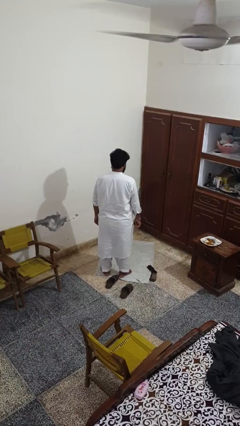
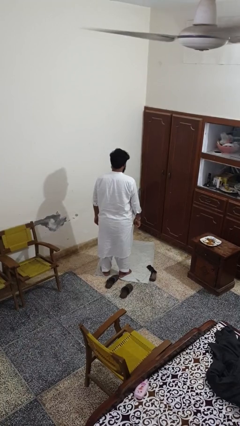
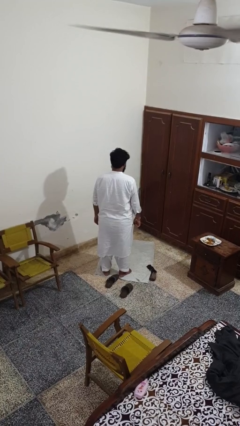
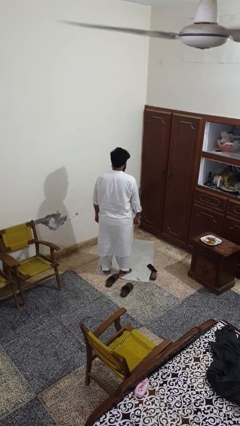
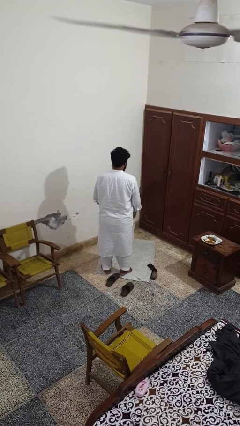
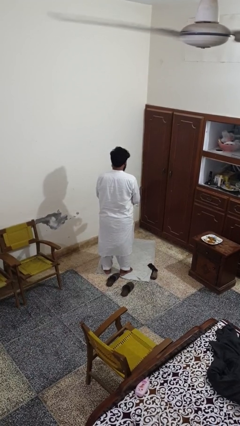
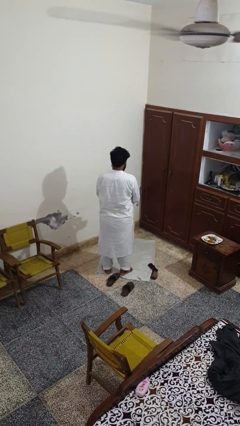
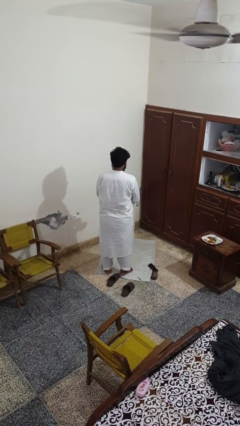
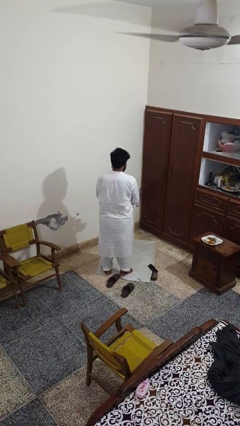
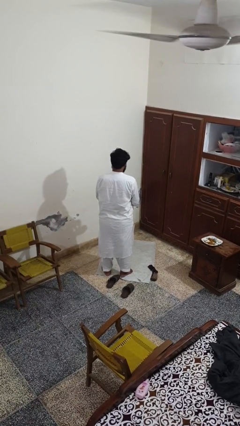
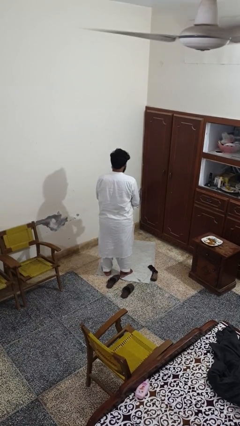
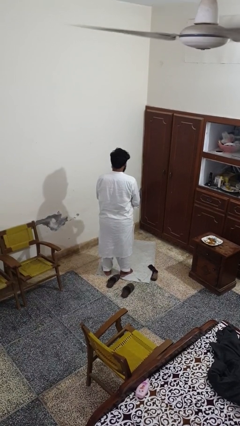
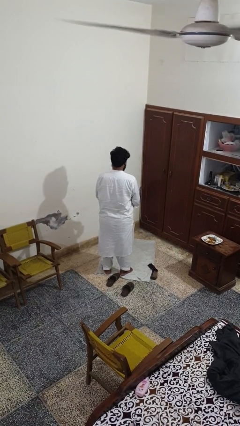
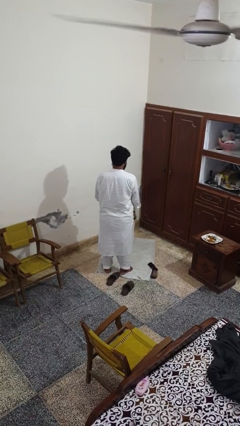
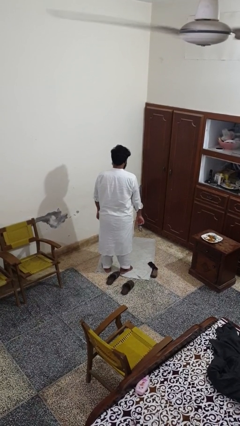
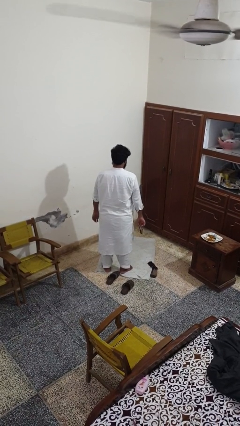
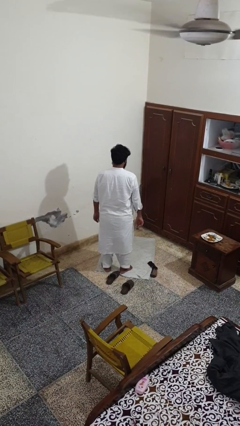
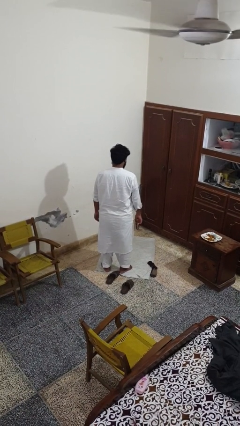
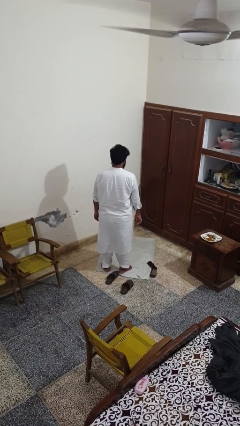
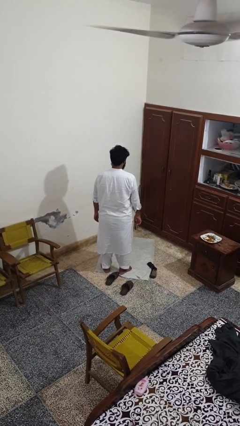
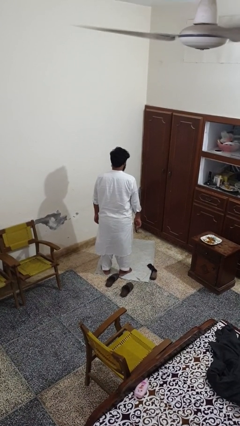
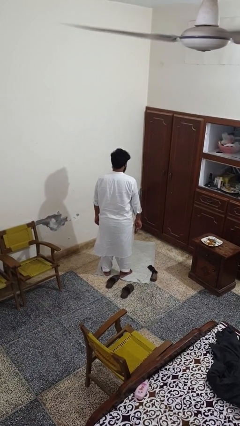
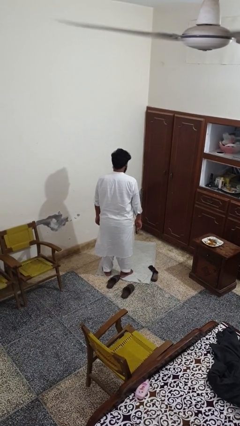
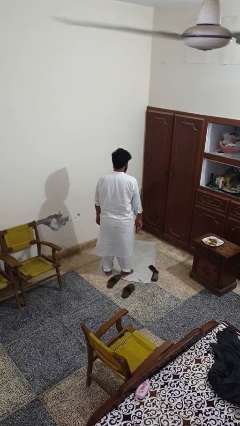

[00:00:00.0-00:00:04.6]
person takes off wristwatch

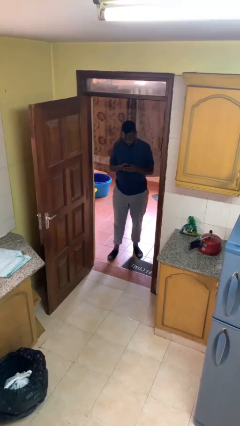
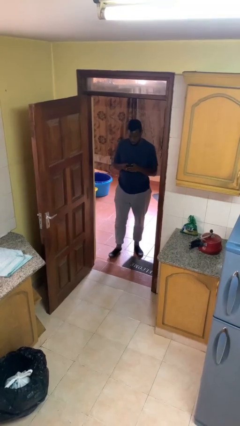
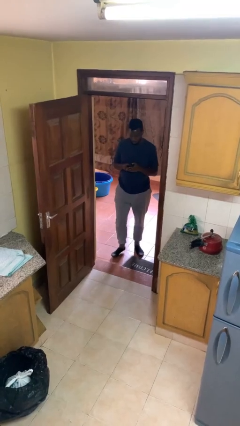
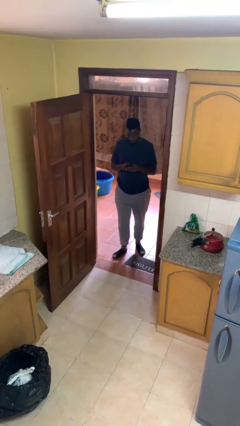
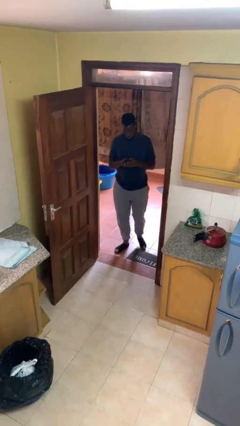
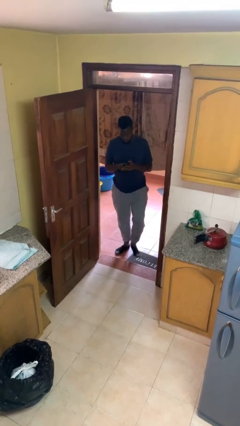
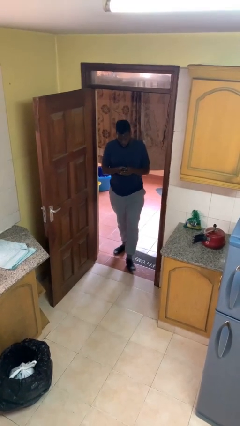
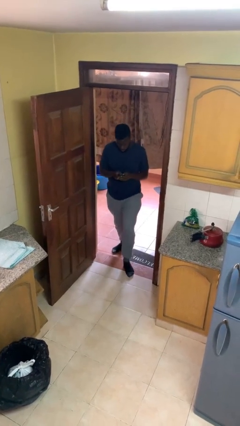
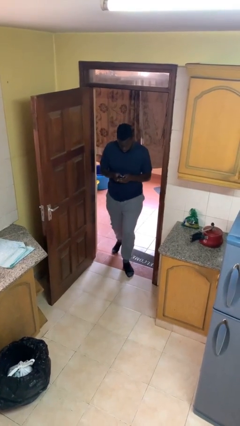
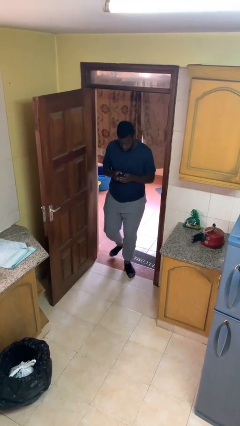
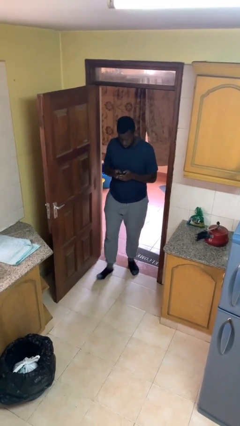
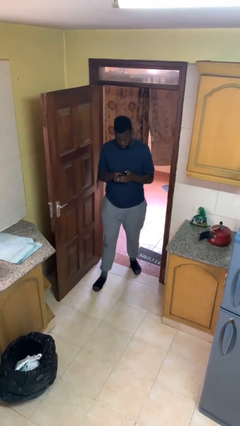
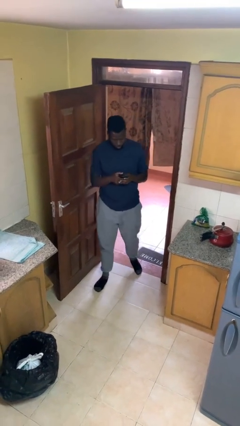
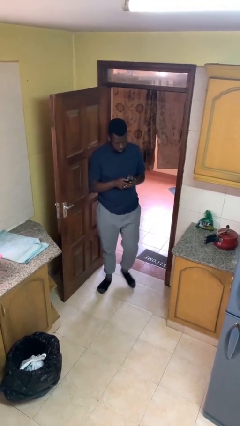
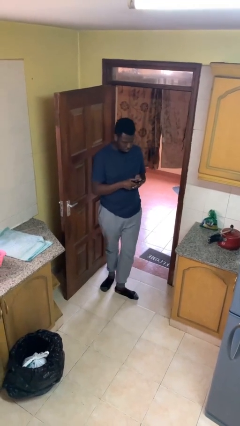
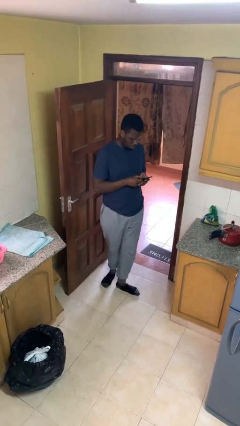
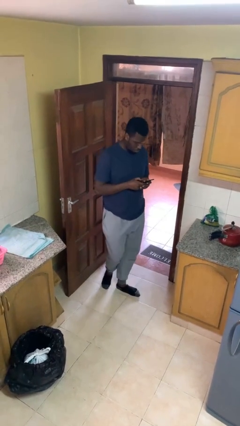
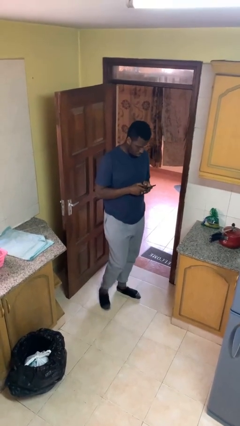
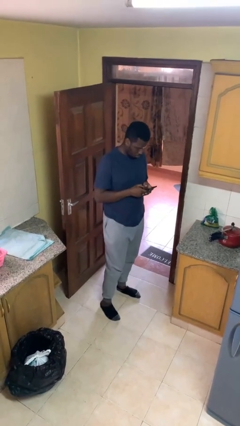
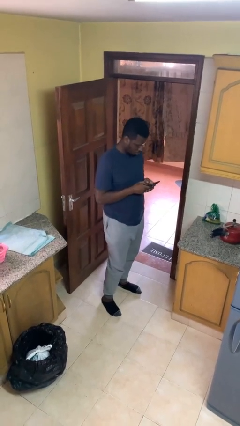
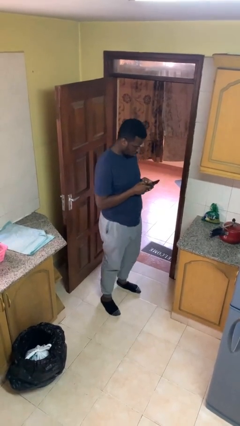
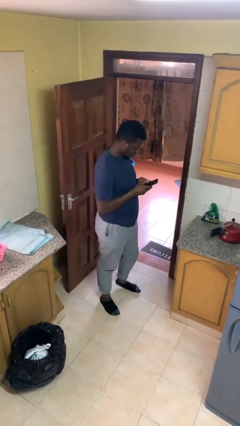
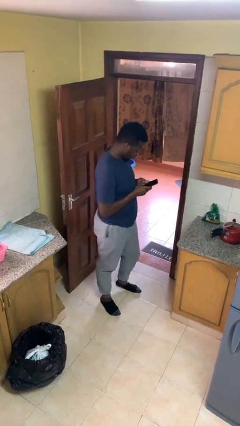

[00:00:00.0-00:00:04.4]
person enters scene through structure

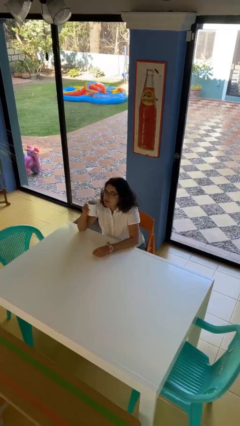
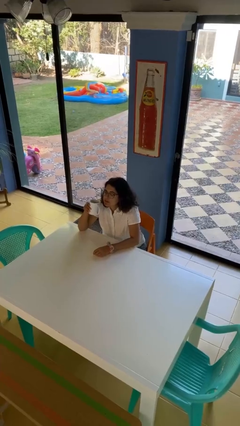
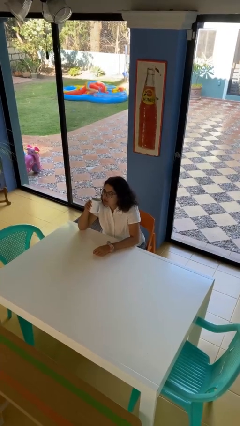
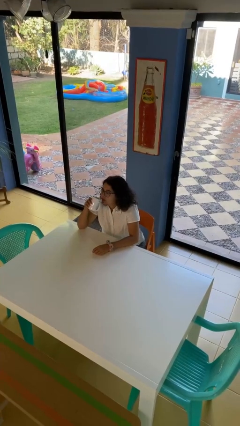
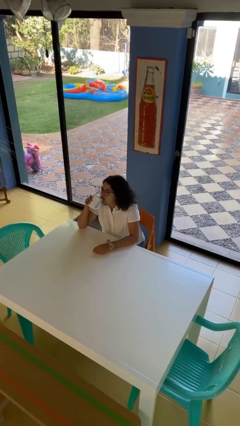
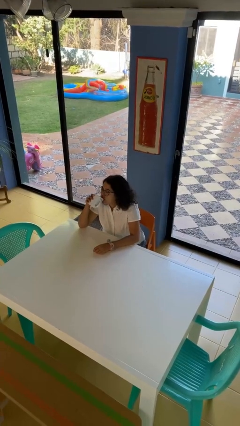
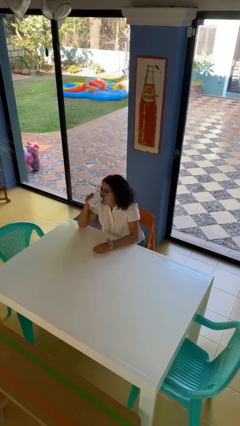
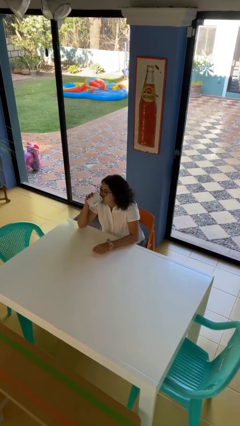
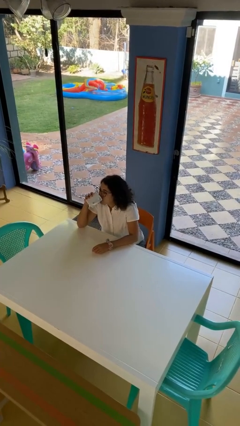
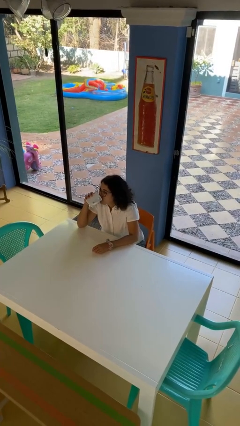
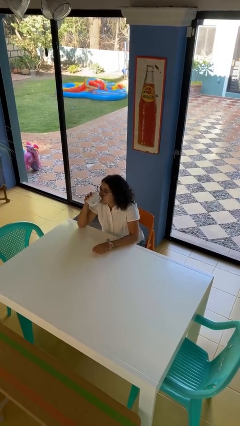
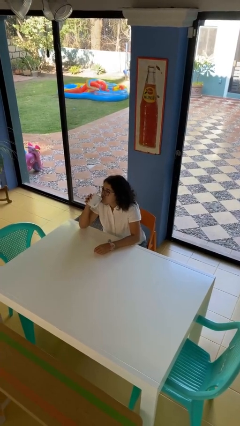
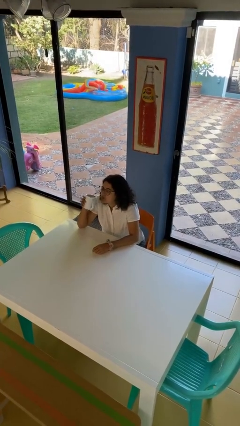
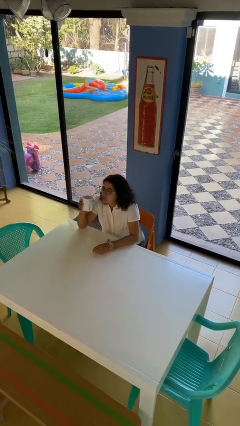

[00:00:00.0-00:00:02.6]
person drinks from mug

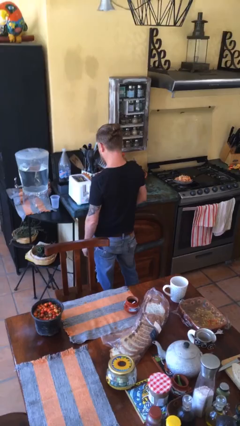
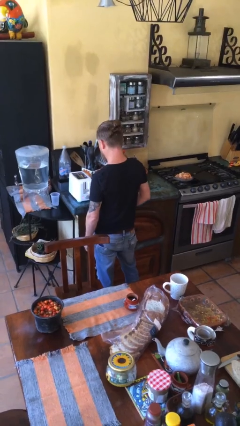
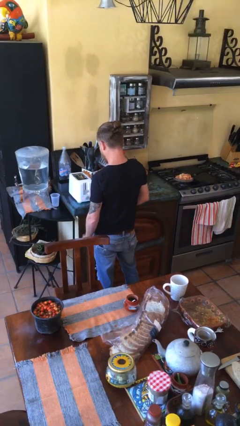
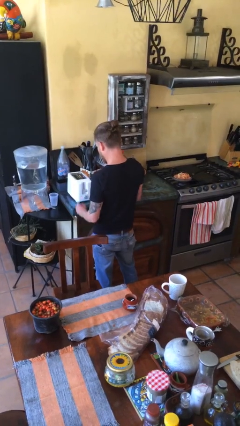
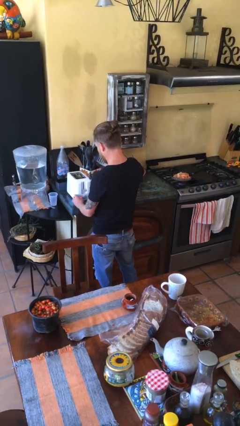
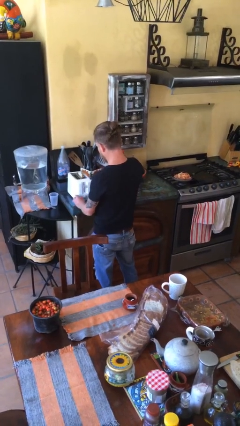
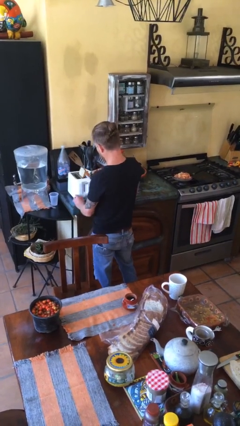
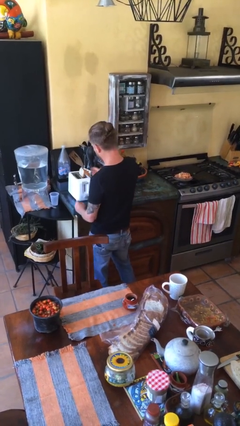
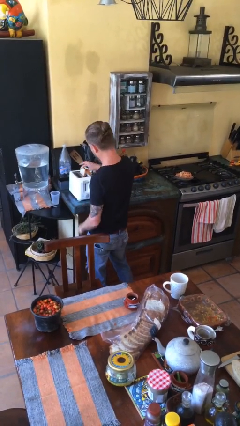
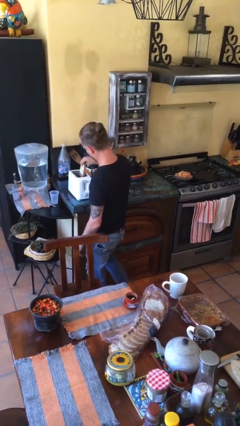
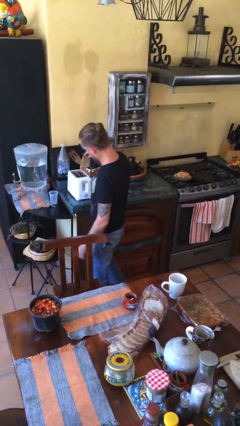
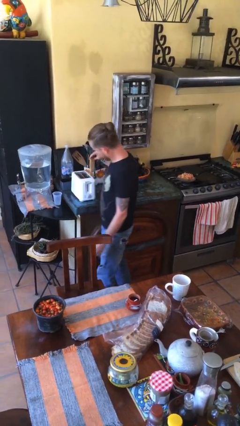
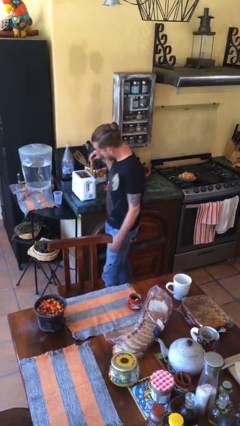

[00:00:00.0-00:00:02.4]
person takes object from toaster

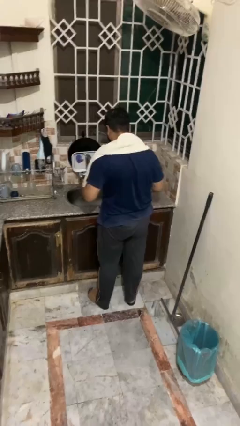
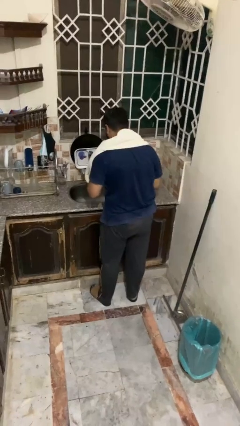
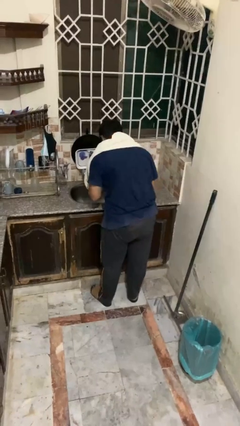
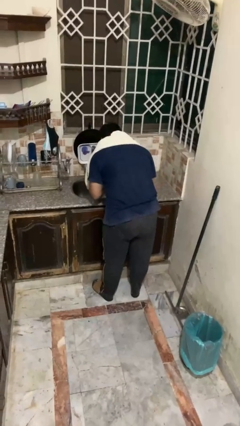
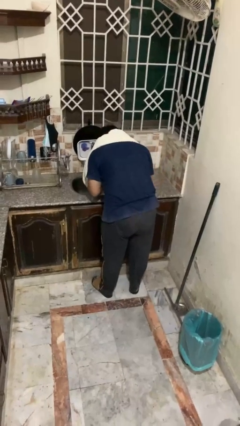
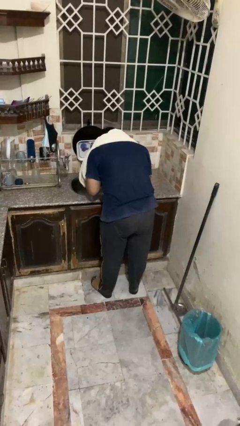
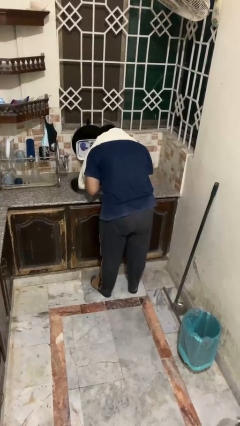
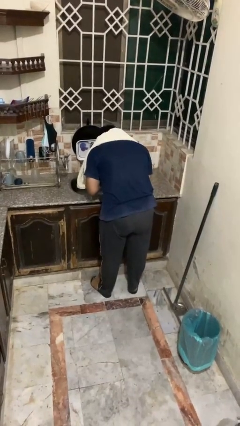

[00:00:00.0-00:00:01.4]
person washes face

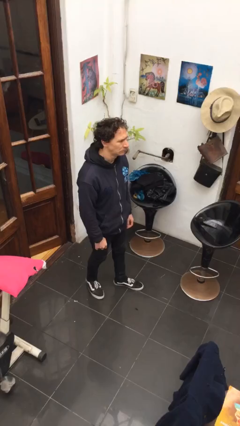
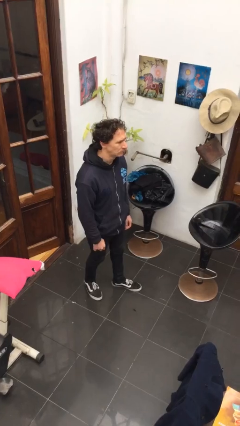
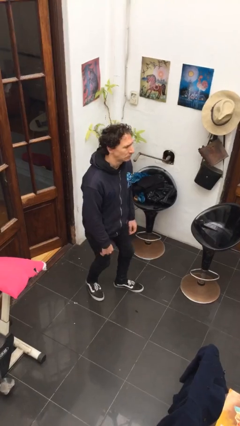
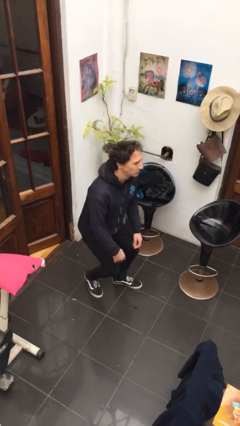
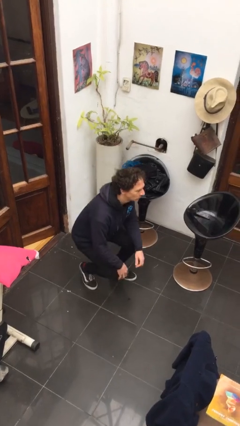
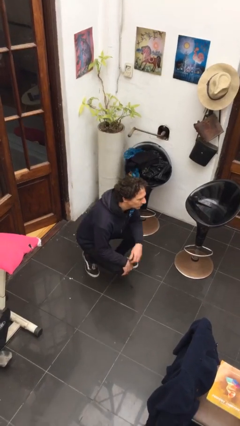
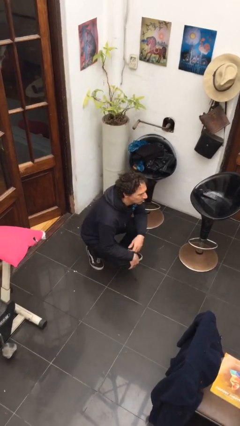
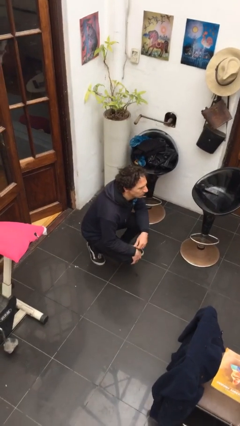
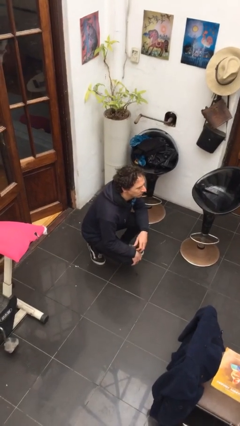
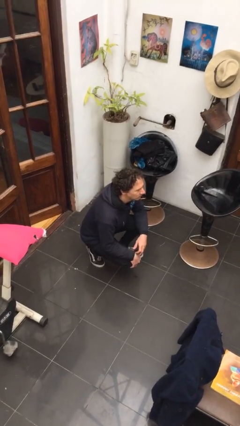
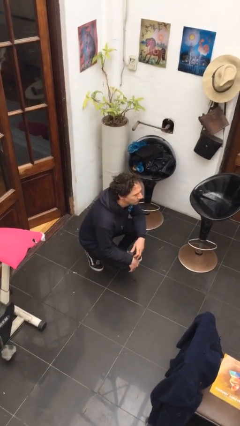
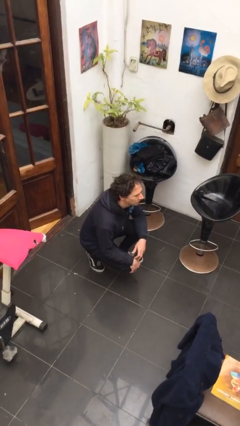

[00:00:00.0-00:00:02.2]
person squats
